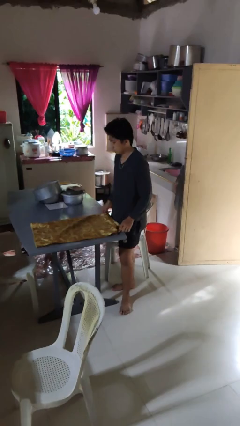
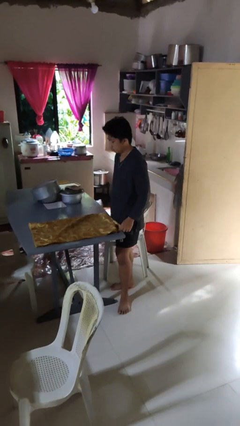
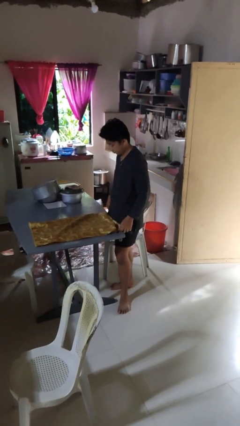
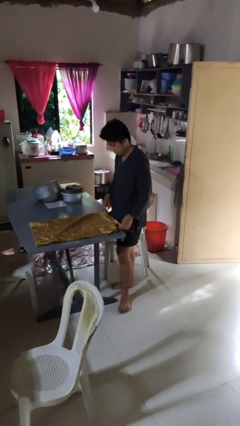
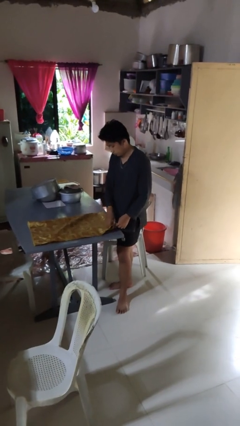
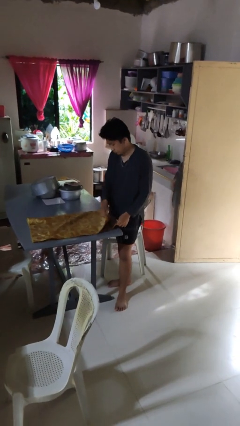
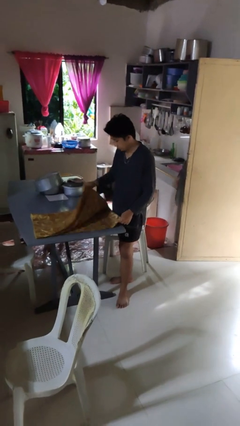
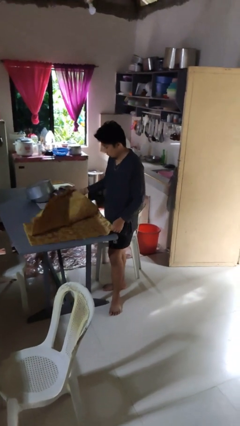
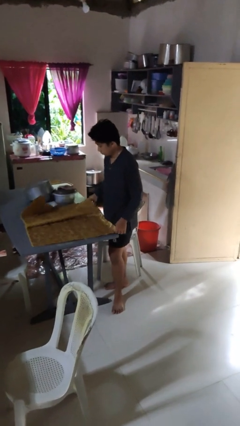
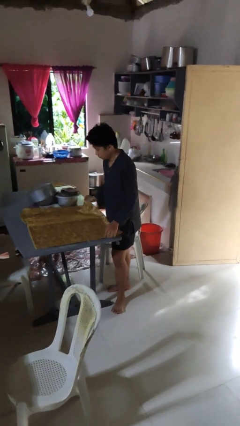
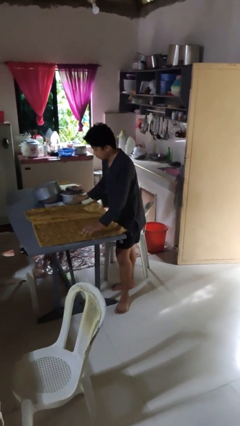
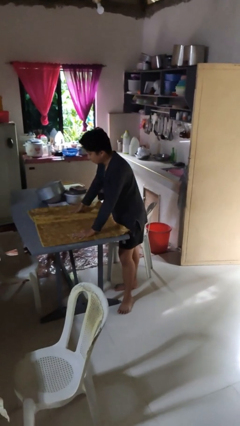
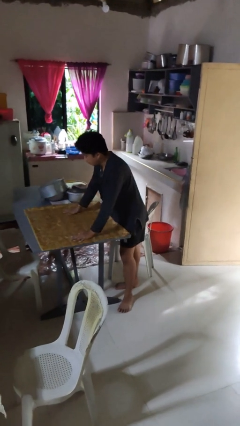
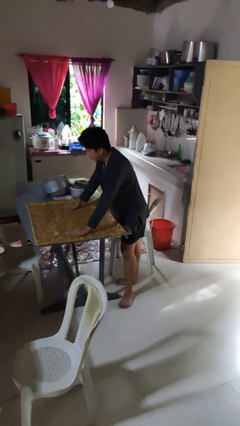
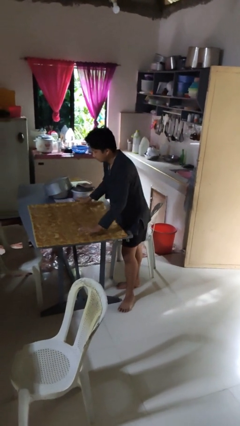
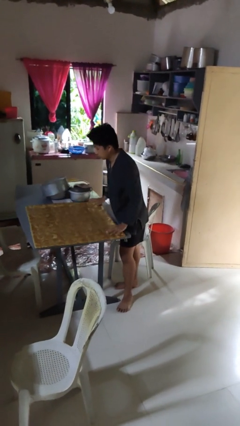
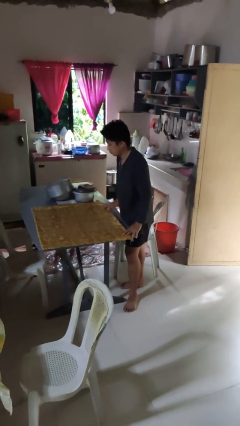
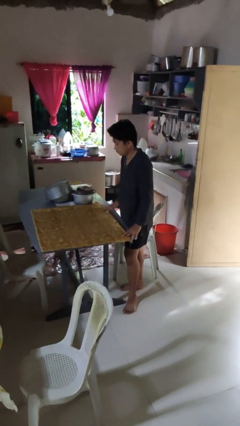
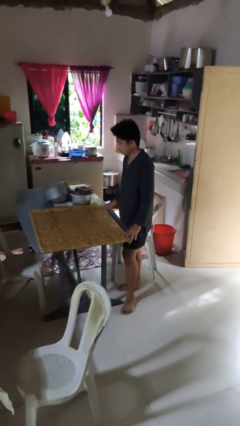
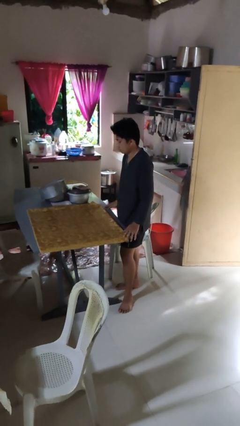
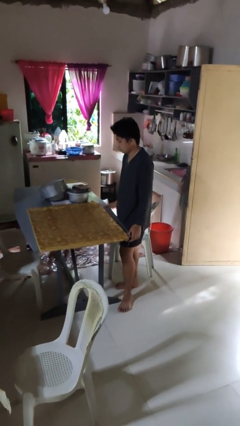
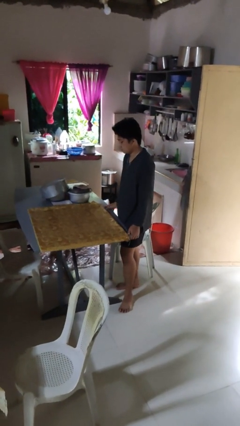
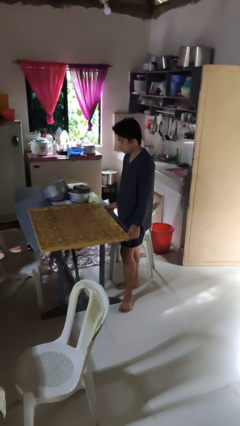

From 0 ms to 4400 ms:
person spreads tablecloth

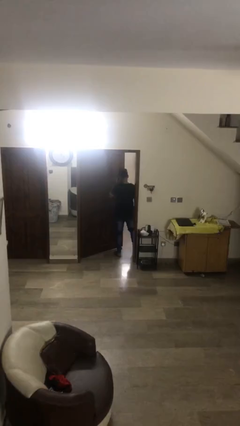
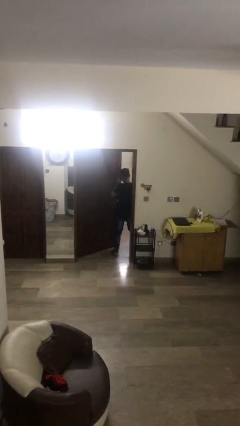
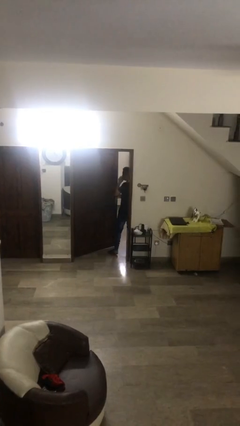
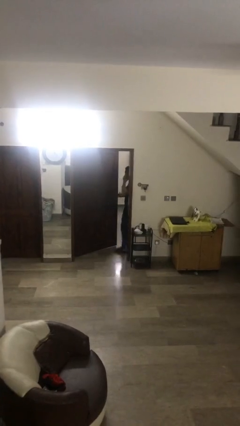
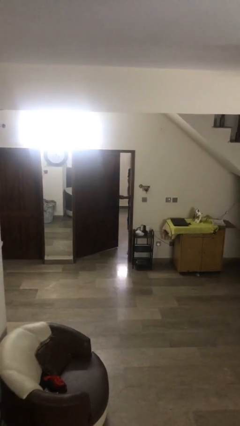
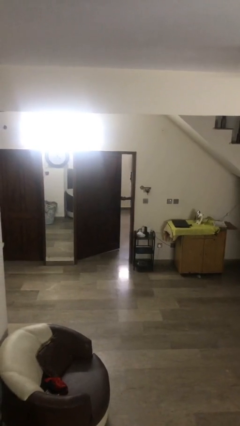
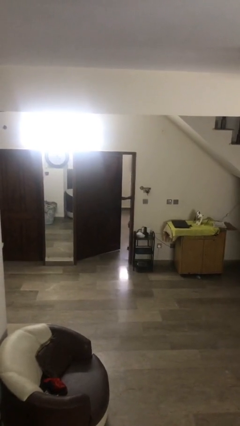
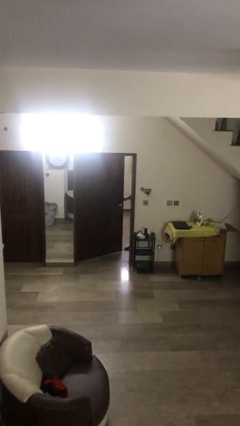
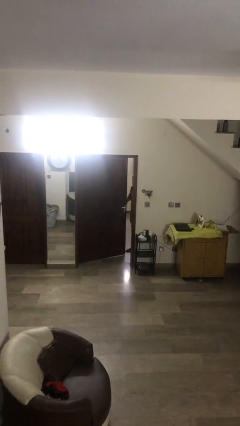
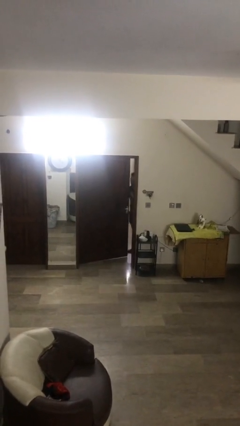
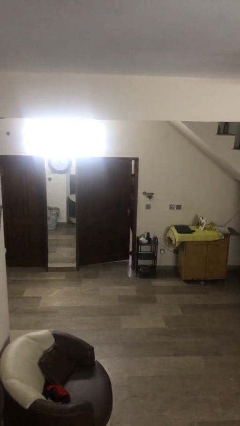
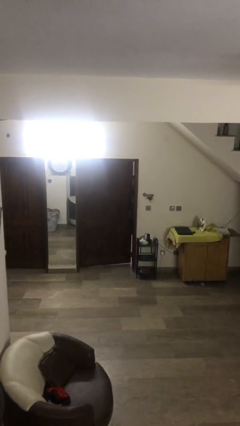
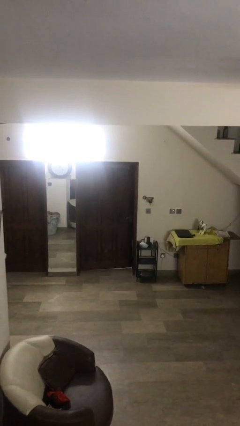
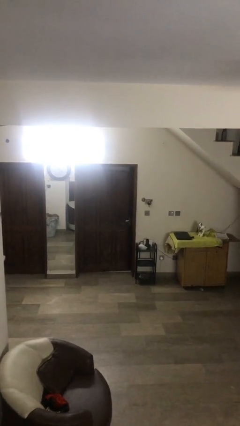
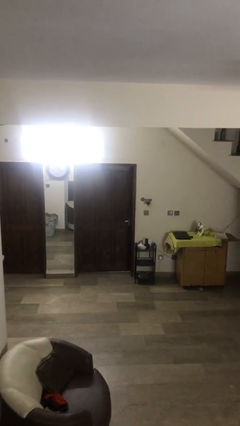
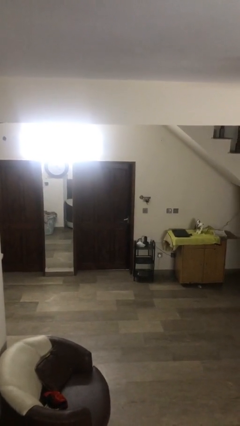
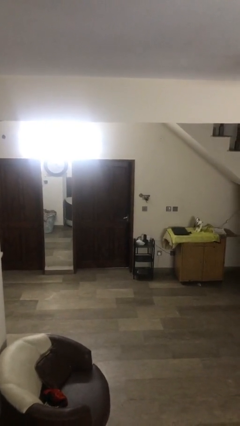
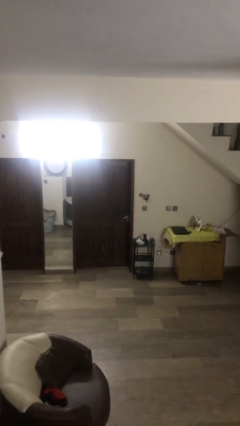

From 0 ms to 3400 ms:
person closes facility door

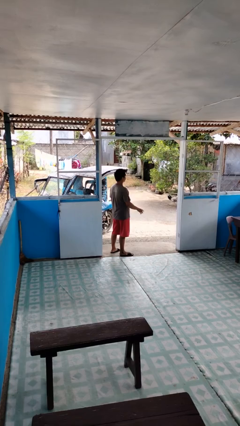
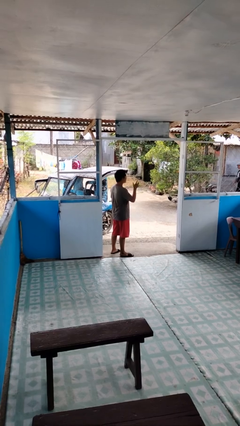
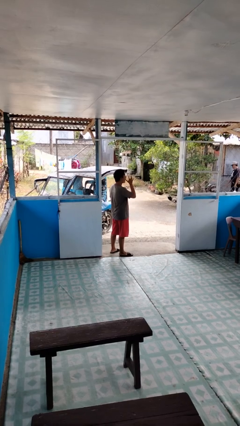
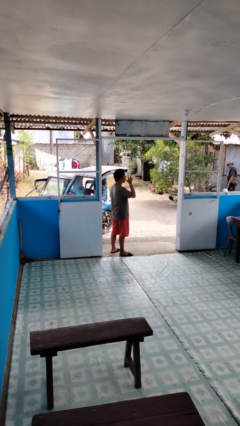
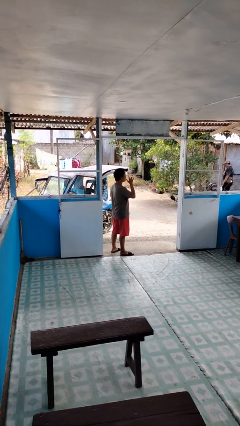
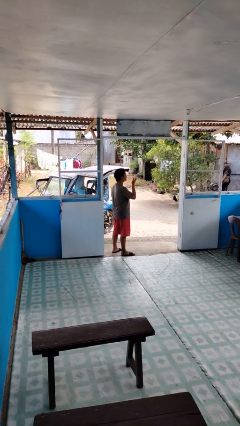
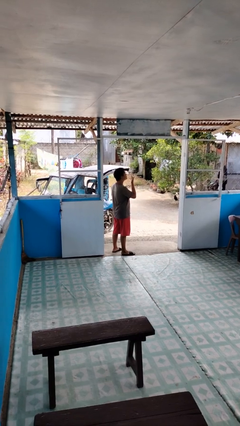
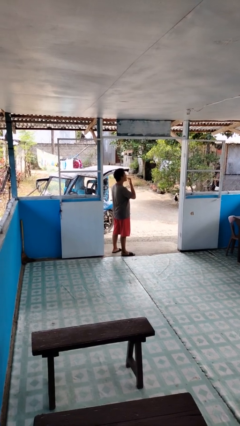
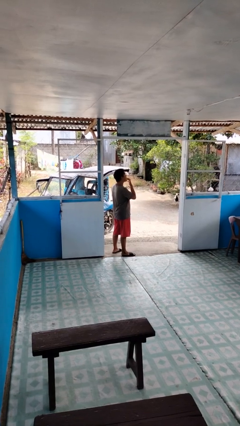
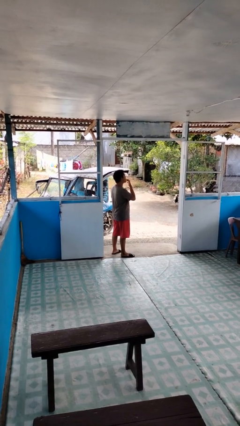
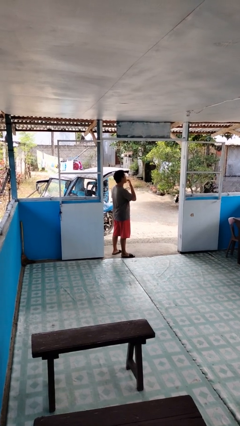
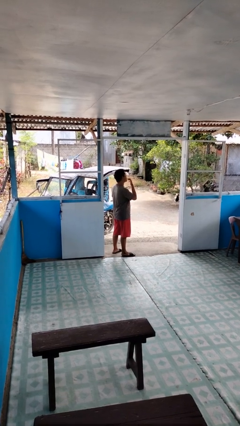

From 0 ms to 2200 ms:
person licks fingers

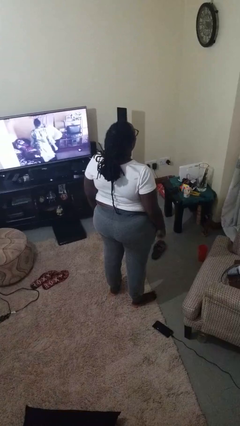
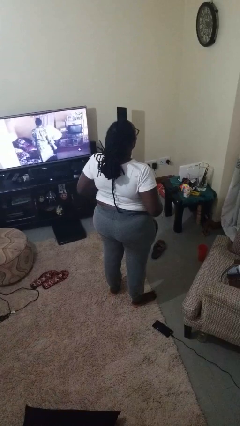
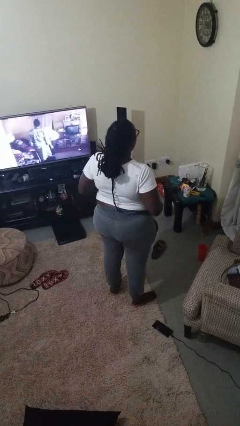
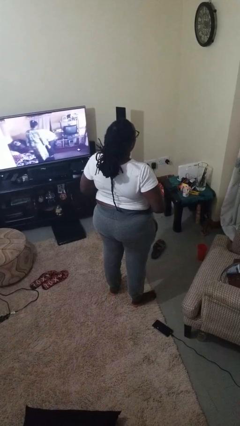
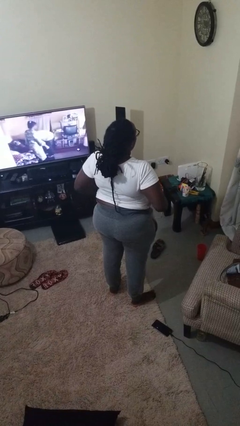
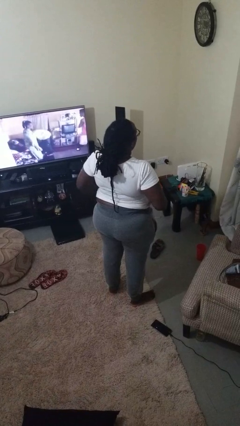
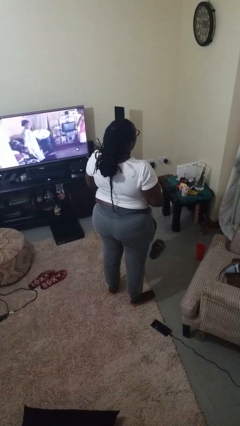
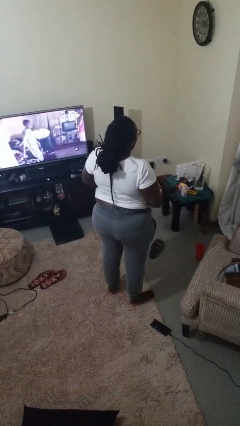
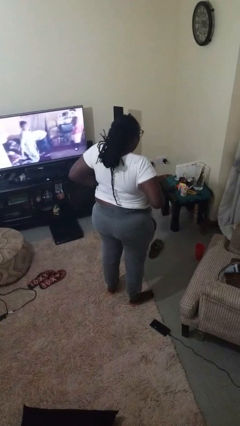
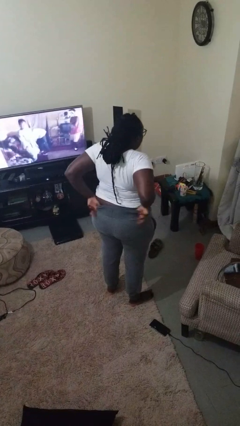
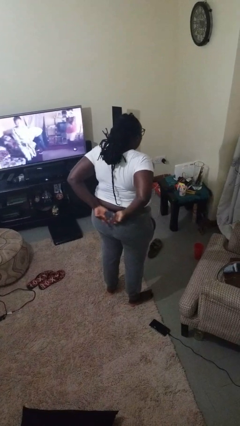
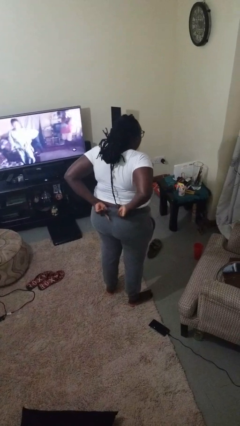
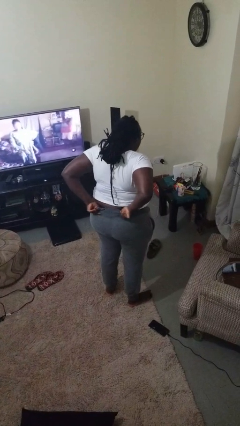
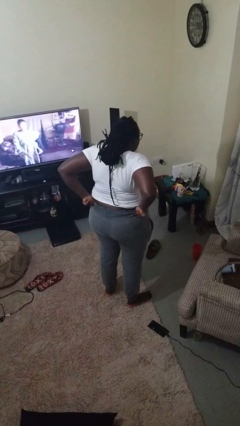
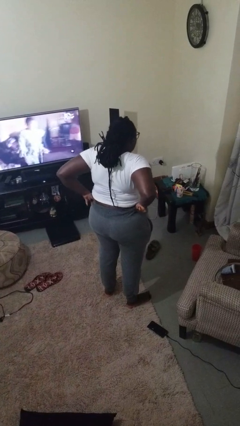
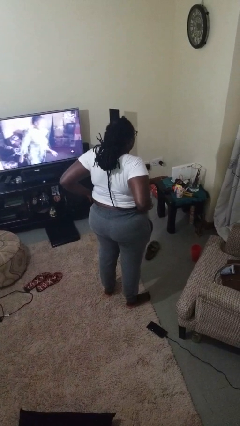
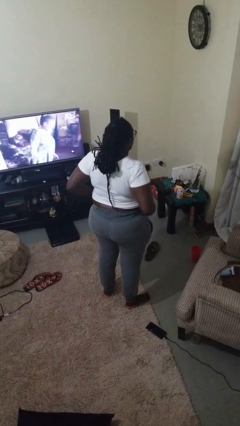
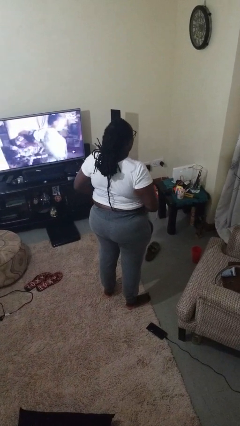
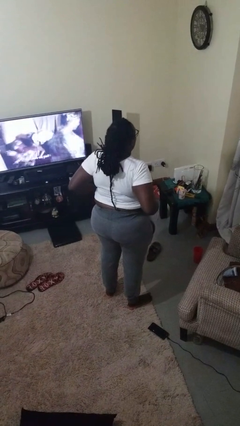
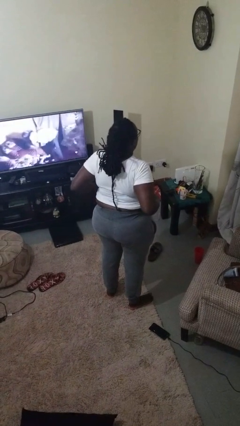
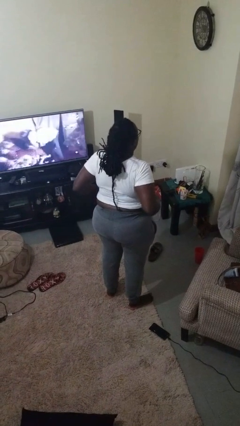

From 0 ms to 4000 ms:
person hikes up pants

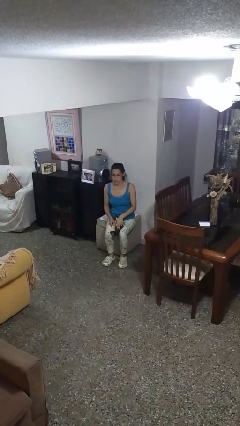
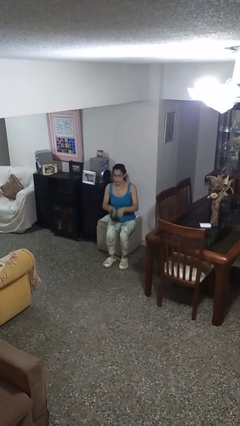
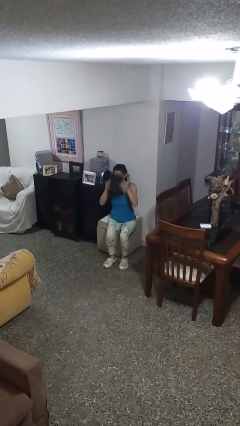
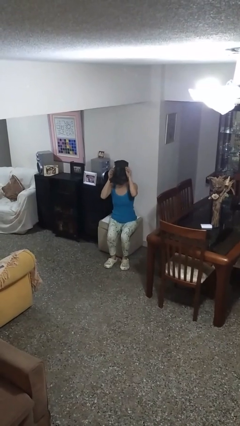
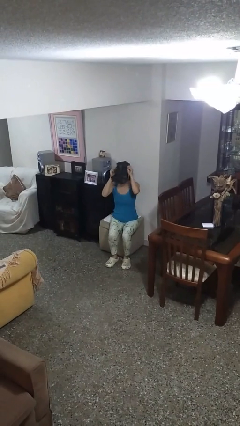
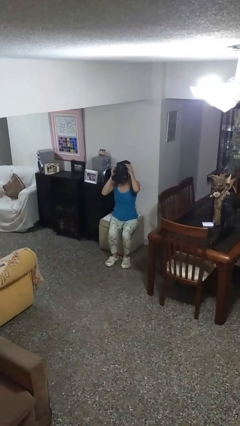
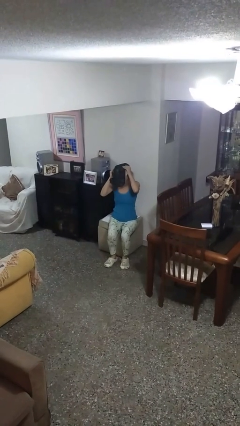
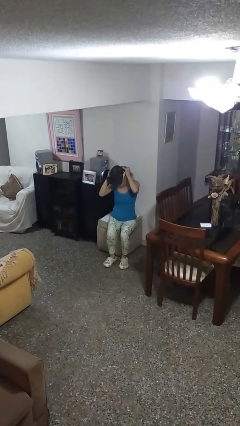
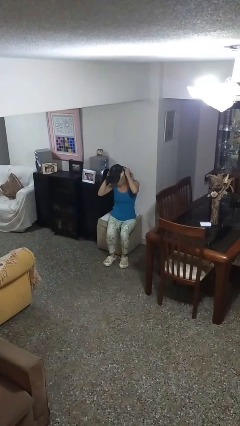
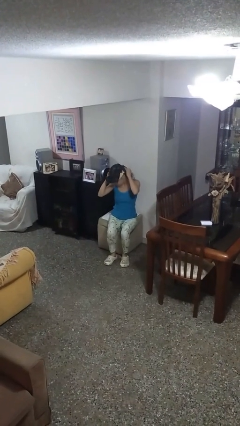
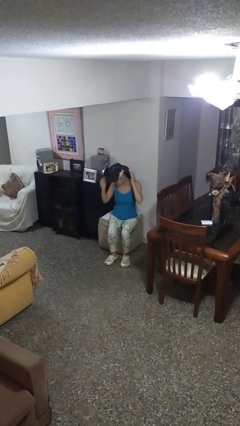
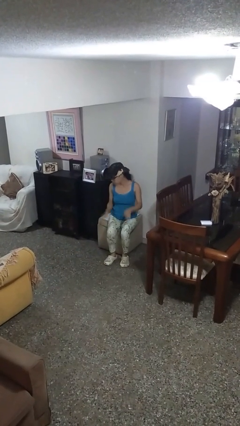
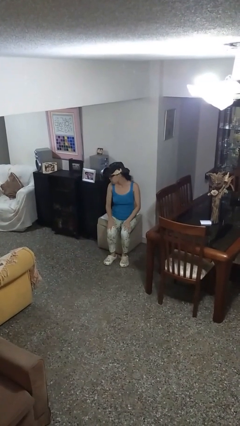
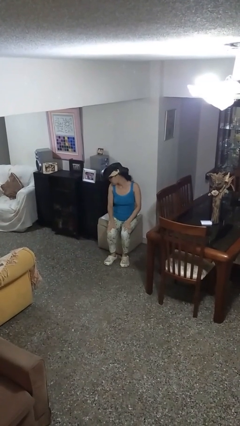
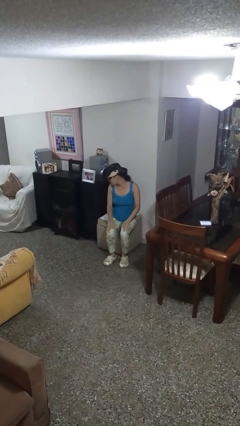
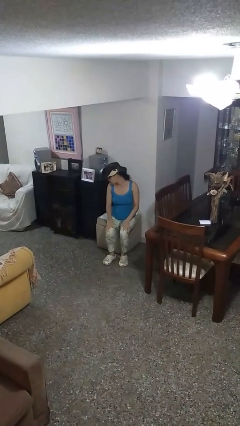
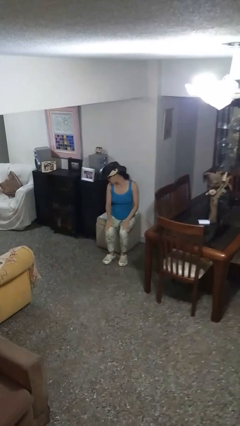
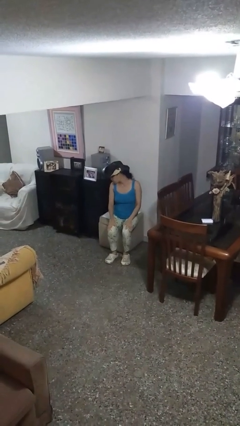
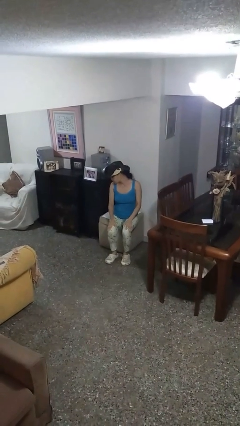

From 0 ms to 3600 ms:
person puts on hat

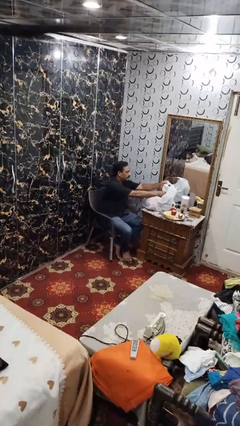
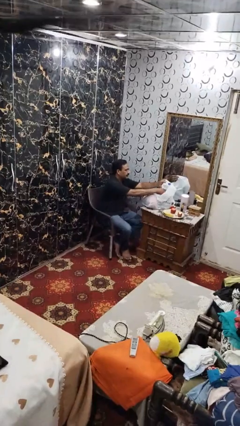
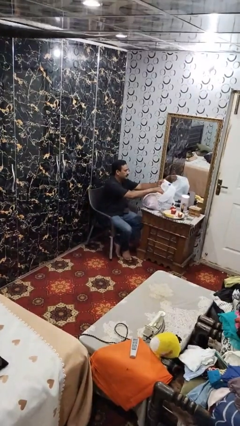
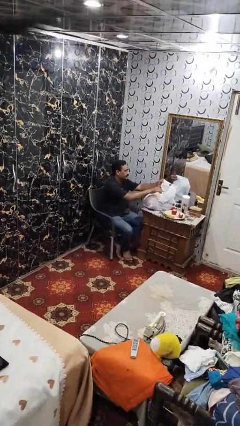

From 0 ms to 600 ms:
person puts object into bag
